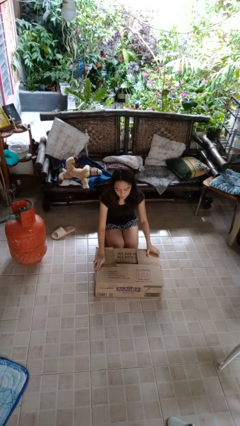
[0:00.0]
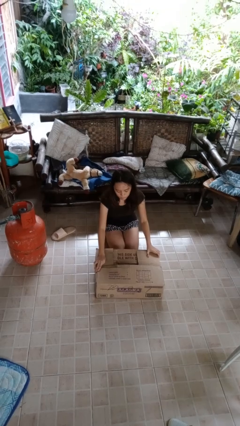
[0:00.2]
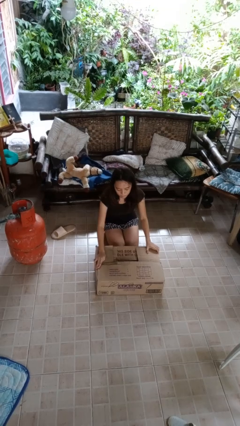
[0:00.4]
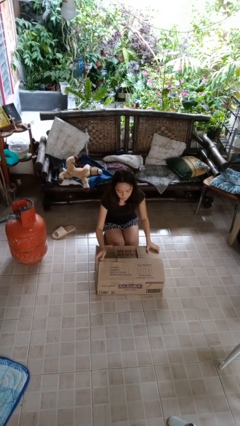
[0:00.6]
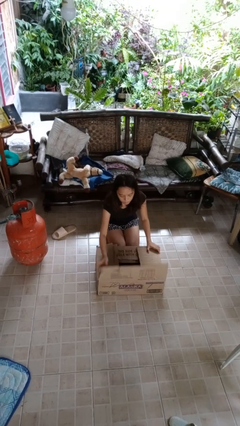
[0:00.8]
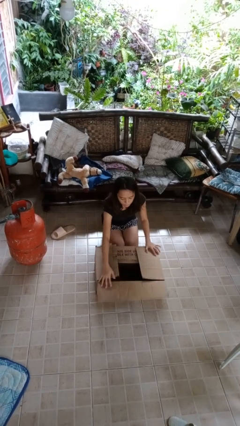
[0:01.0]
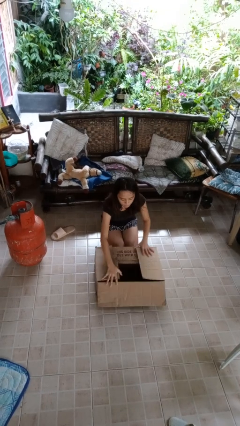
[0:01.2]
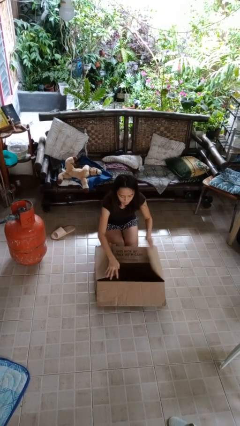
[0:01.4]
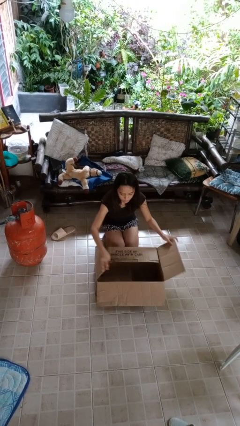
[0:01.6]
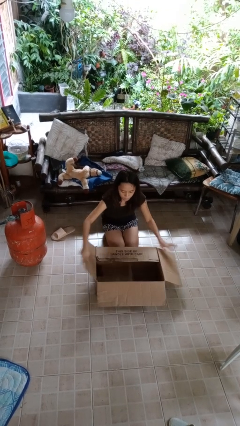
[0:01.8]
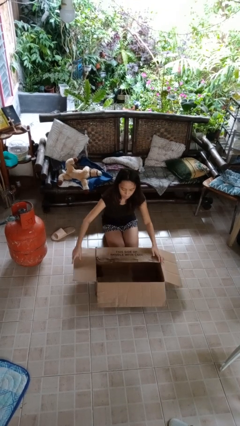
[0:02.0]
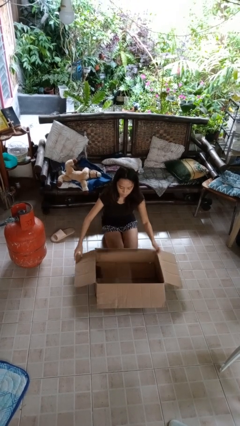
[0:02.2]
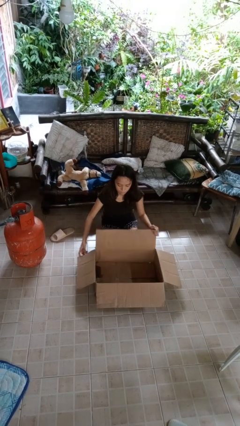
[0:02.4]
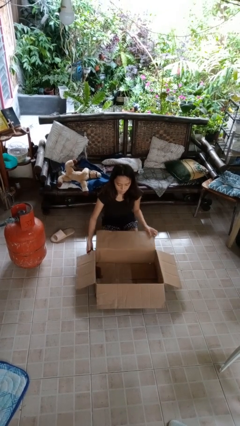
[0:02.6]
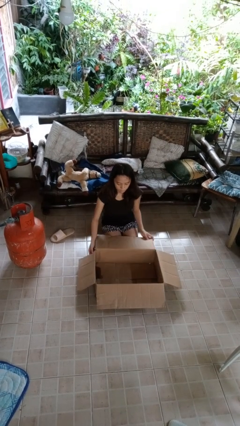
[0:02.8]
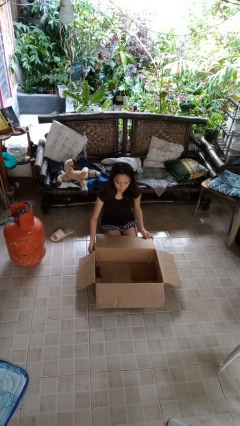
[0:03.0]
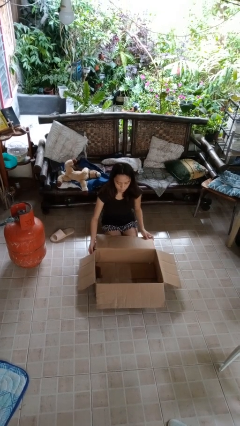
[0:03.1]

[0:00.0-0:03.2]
person opens box

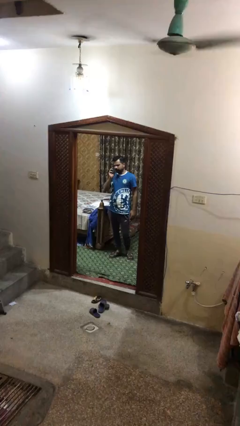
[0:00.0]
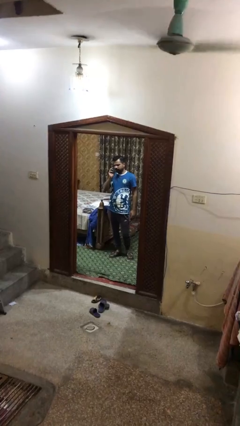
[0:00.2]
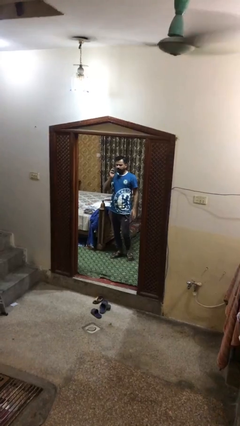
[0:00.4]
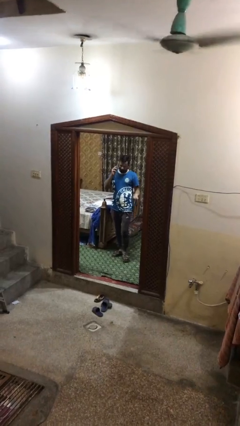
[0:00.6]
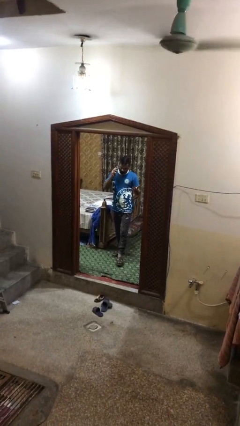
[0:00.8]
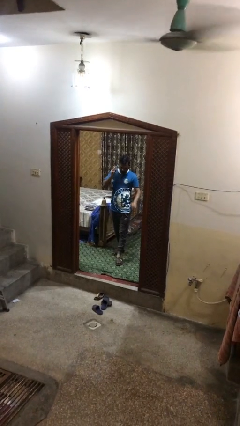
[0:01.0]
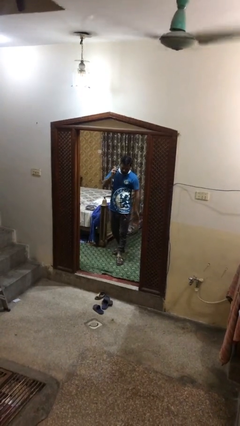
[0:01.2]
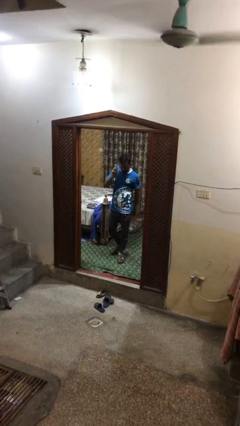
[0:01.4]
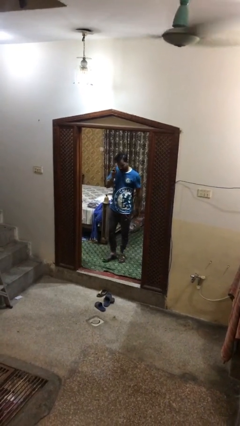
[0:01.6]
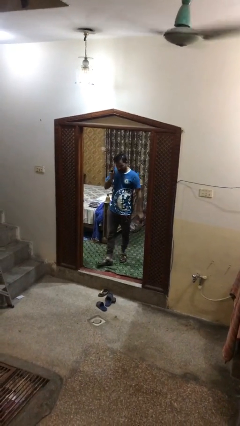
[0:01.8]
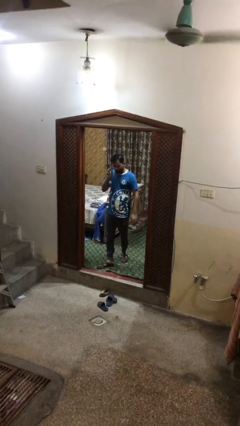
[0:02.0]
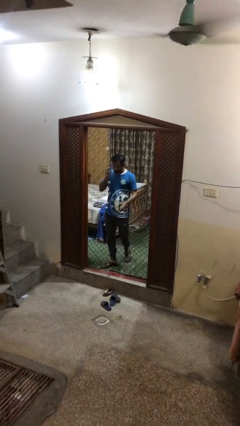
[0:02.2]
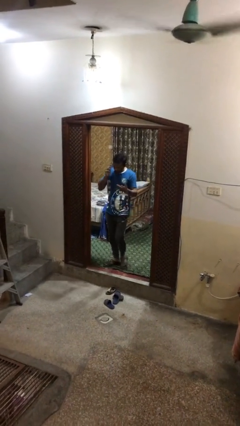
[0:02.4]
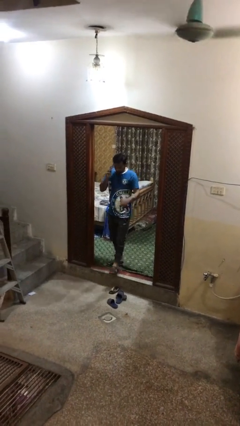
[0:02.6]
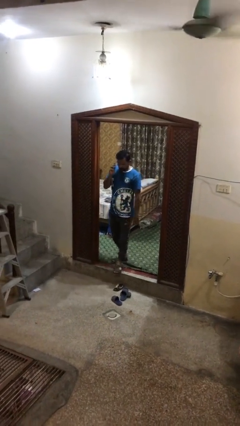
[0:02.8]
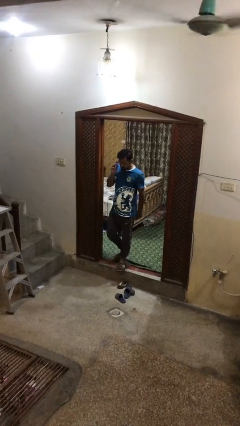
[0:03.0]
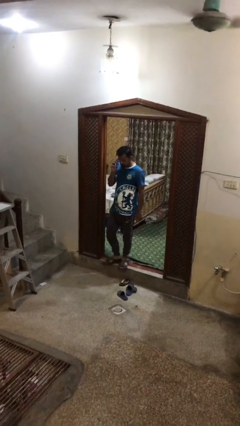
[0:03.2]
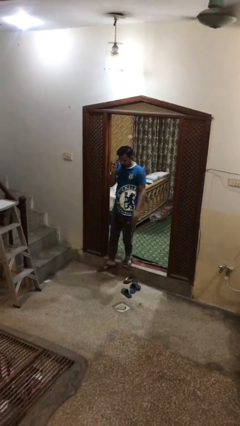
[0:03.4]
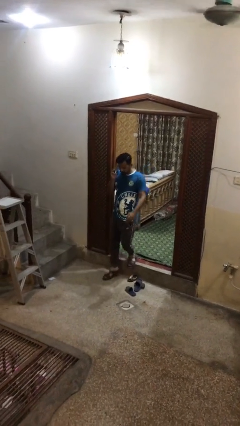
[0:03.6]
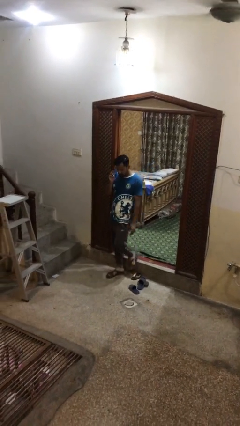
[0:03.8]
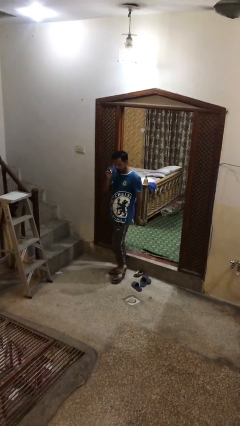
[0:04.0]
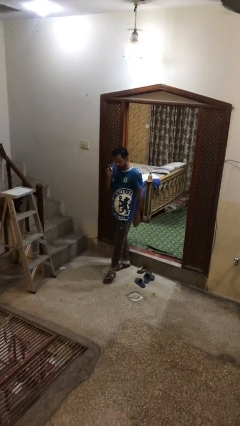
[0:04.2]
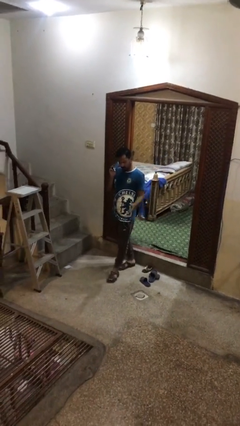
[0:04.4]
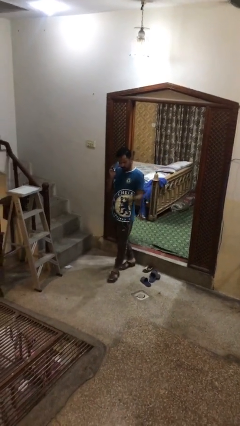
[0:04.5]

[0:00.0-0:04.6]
person enters scene through structure

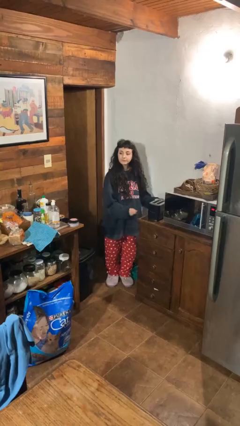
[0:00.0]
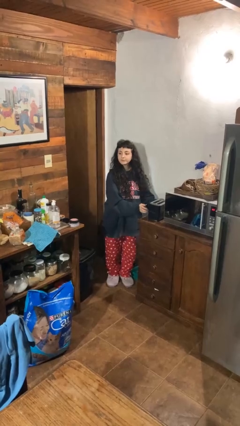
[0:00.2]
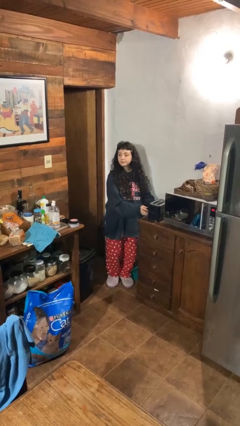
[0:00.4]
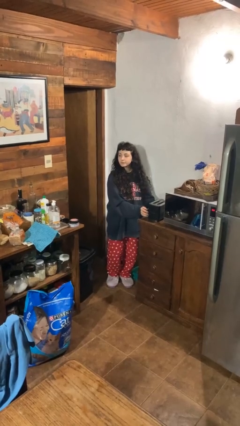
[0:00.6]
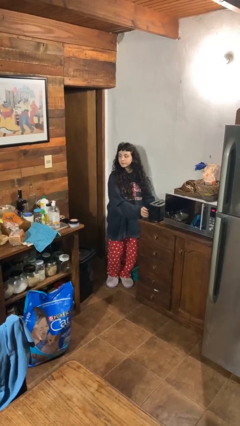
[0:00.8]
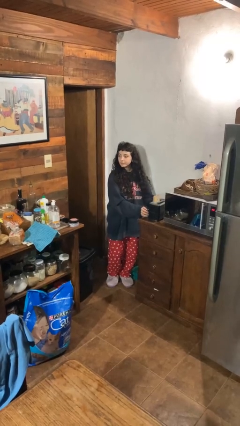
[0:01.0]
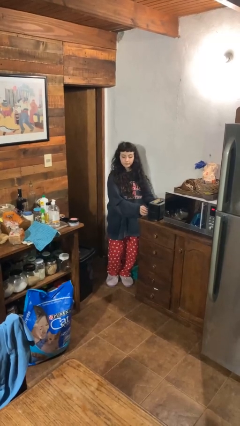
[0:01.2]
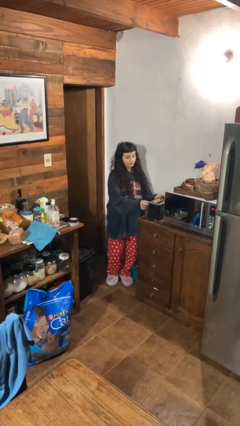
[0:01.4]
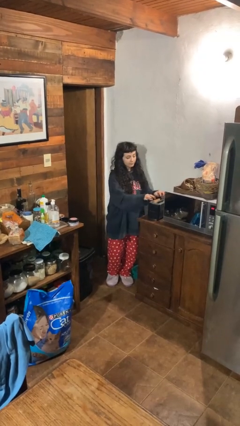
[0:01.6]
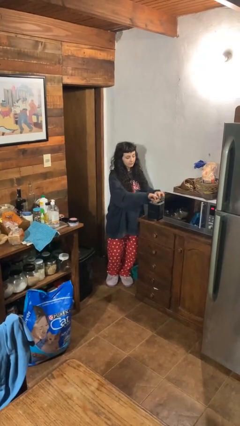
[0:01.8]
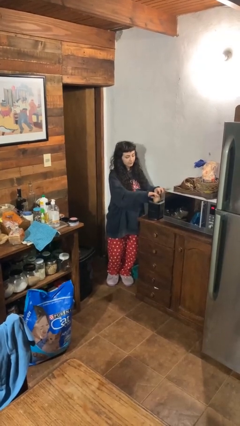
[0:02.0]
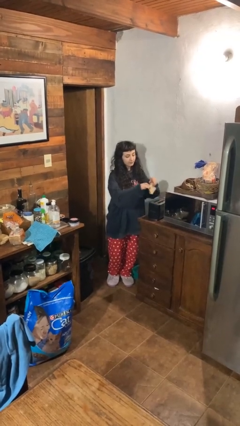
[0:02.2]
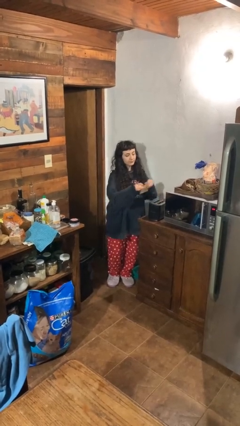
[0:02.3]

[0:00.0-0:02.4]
person takes object from toaster

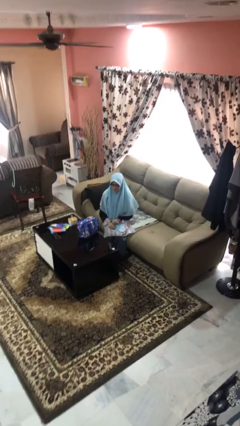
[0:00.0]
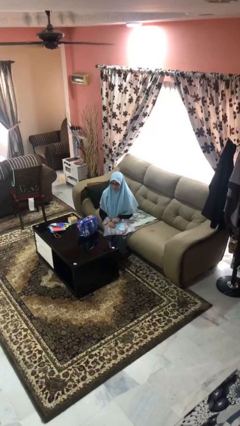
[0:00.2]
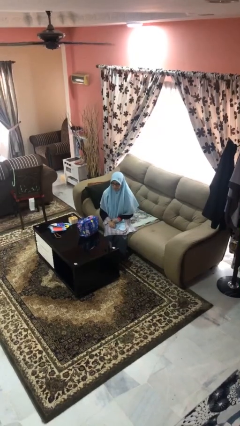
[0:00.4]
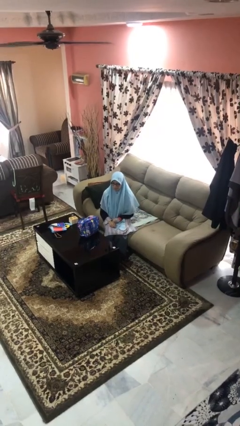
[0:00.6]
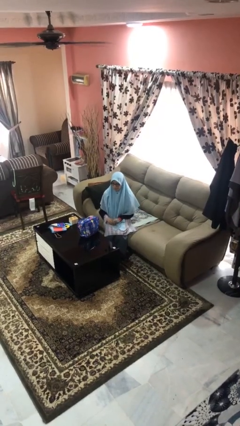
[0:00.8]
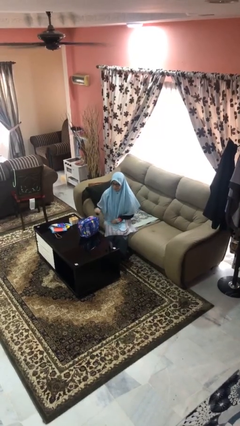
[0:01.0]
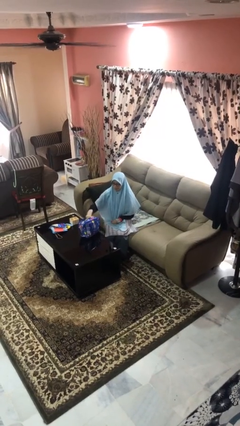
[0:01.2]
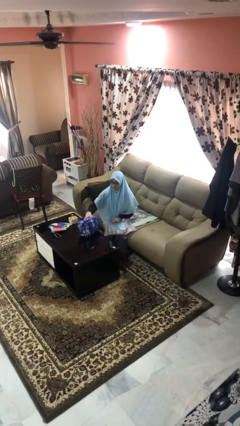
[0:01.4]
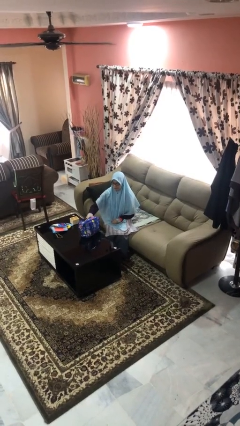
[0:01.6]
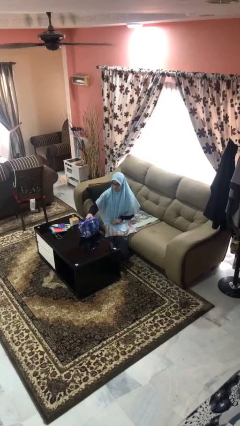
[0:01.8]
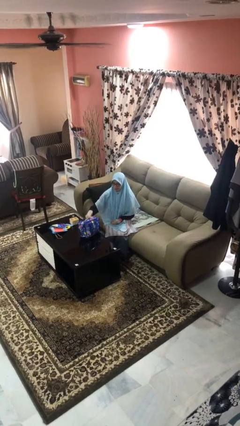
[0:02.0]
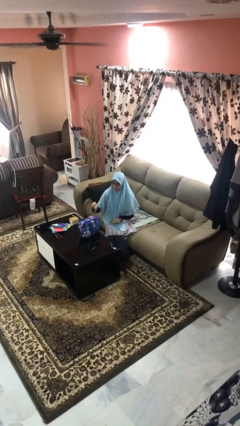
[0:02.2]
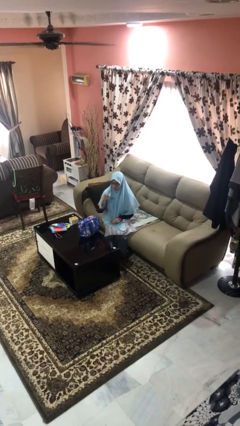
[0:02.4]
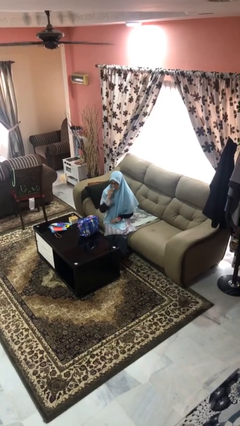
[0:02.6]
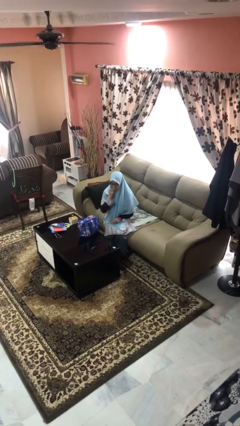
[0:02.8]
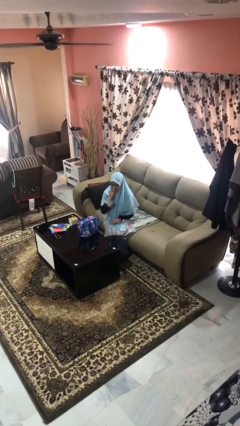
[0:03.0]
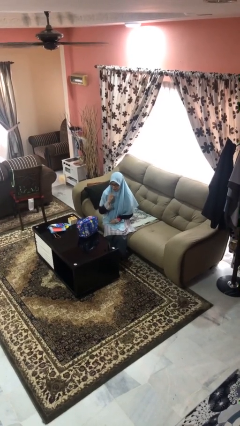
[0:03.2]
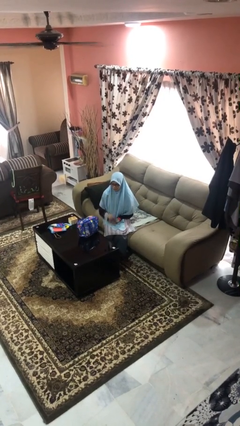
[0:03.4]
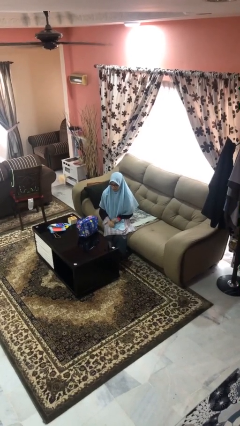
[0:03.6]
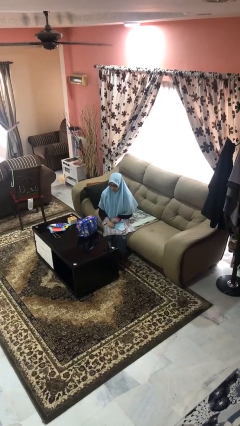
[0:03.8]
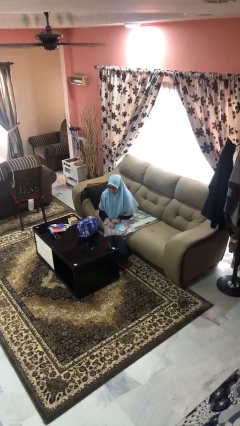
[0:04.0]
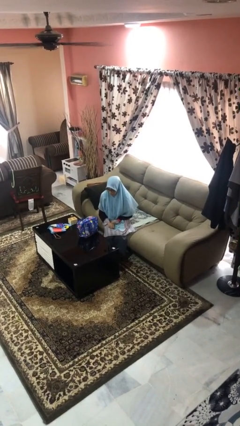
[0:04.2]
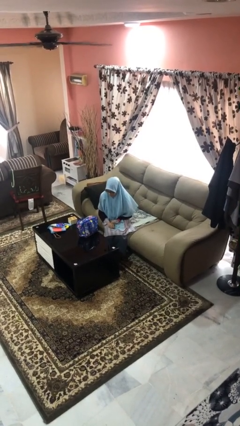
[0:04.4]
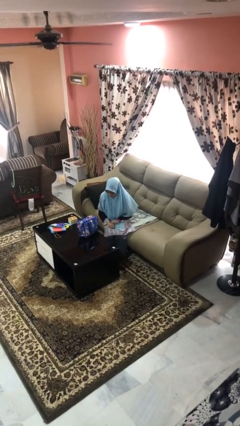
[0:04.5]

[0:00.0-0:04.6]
person eats snack from bag

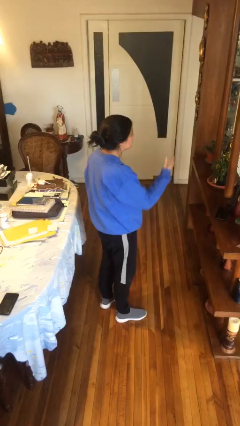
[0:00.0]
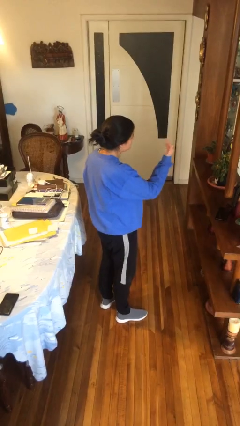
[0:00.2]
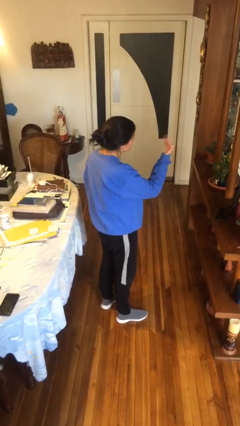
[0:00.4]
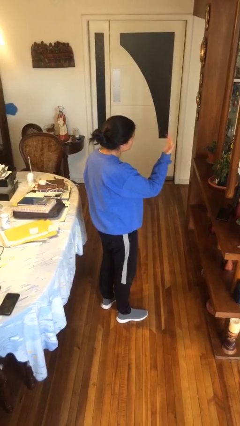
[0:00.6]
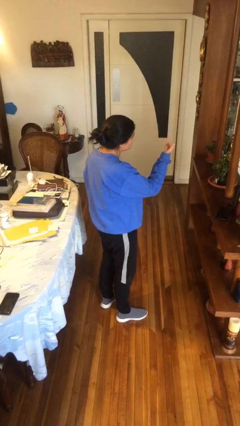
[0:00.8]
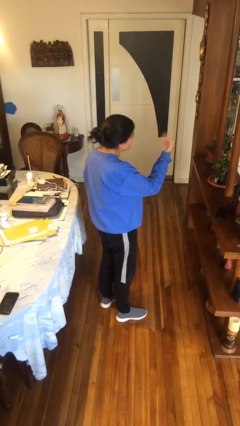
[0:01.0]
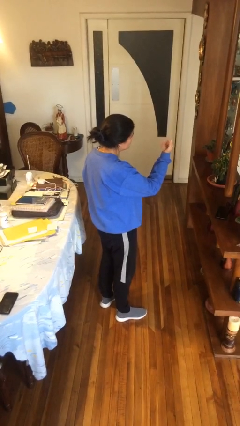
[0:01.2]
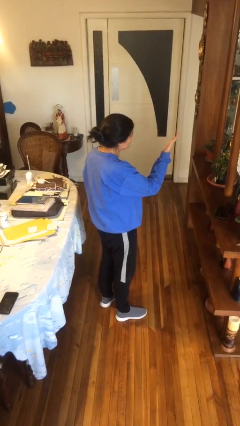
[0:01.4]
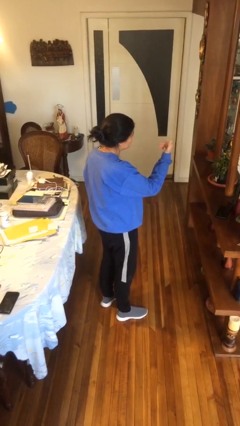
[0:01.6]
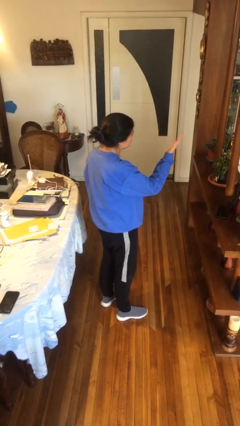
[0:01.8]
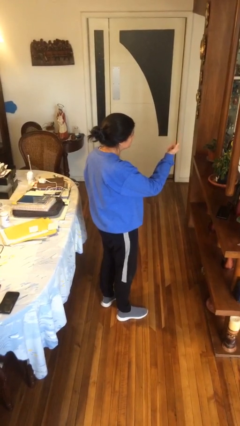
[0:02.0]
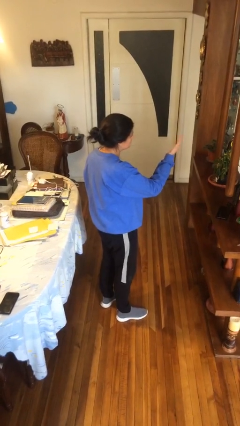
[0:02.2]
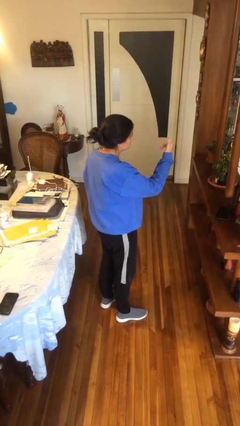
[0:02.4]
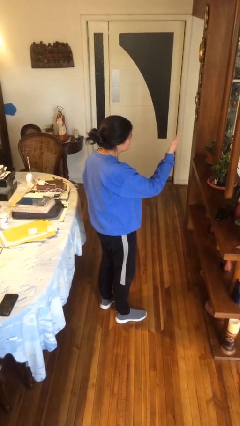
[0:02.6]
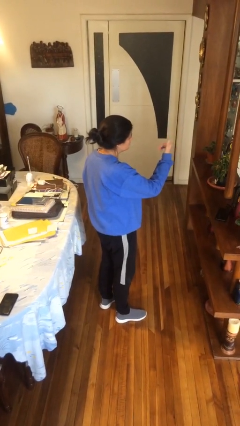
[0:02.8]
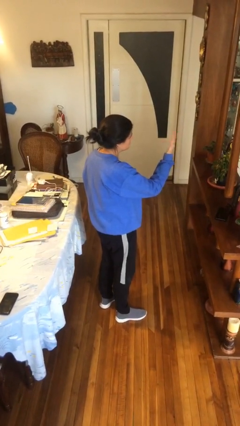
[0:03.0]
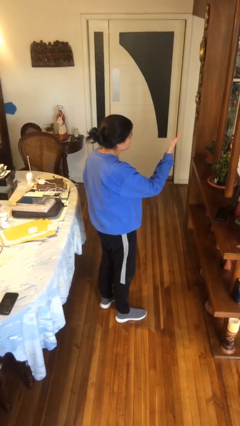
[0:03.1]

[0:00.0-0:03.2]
person gestures come here
